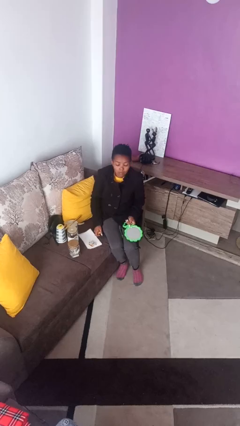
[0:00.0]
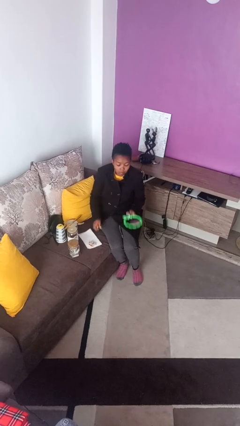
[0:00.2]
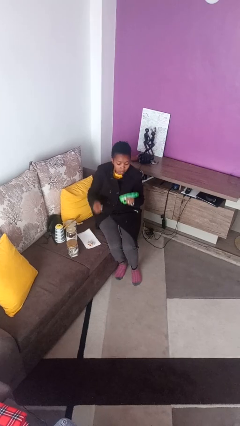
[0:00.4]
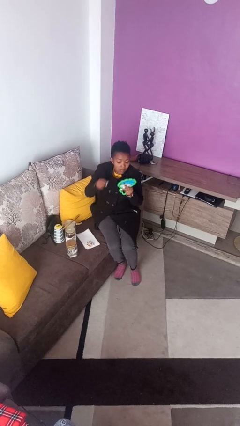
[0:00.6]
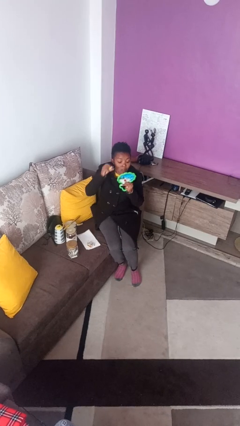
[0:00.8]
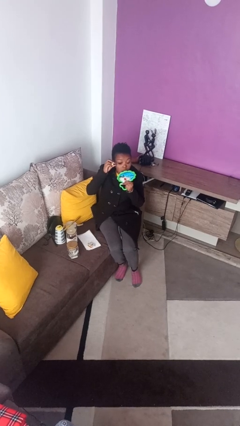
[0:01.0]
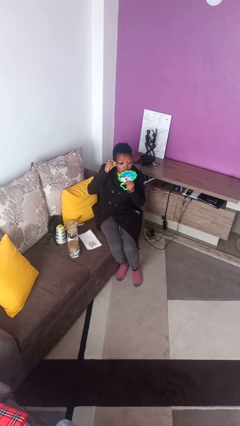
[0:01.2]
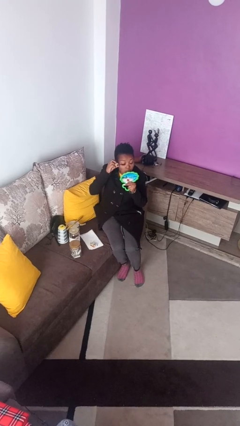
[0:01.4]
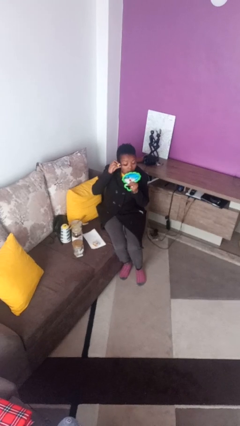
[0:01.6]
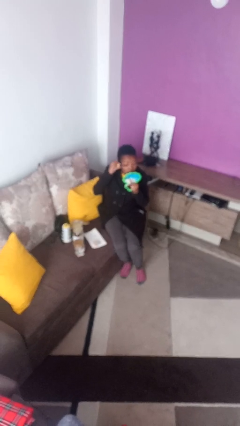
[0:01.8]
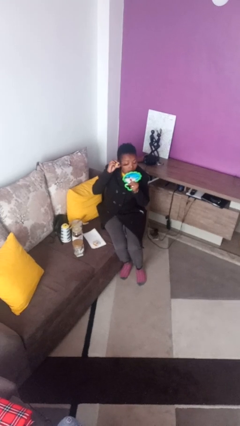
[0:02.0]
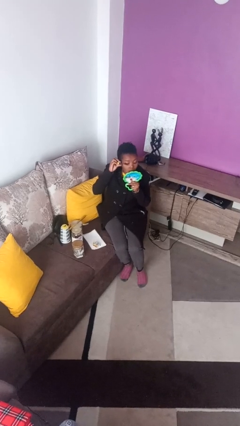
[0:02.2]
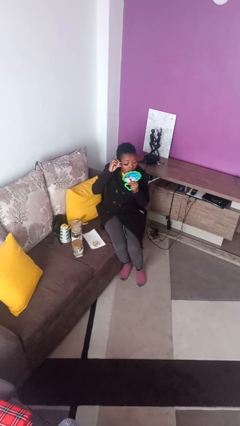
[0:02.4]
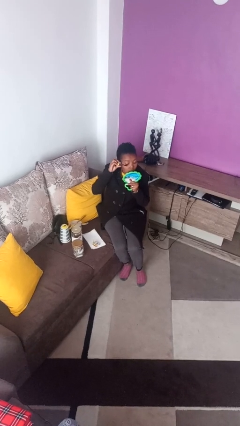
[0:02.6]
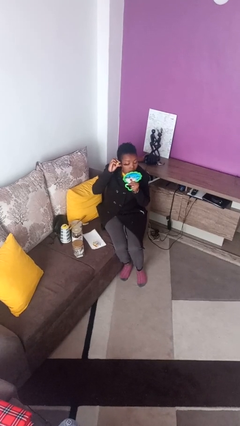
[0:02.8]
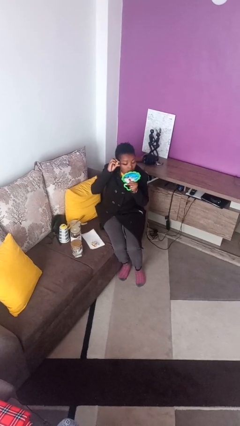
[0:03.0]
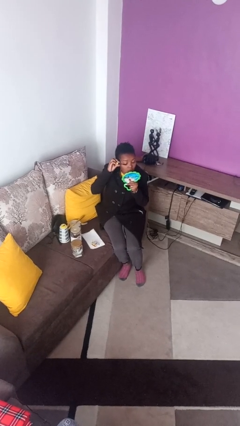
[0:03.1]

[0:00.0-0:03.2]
person applies eye makeup

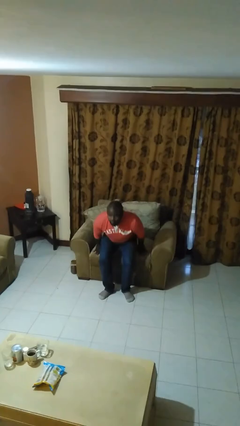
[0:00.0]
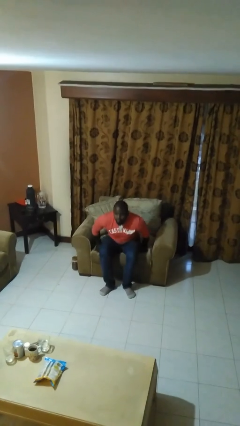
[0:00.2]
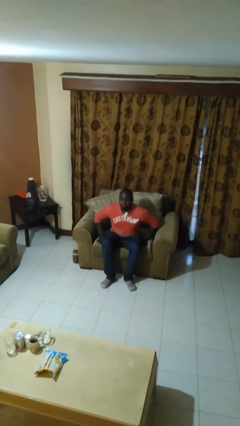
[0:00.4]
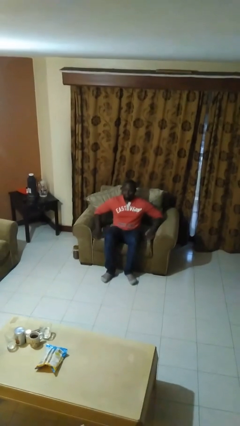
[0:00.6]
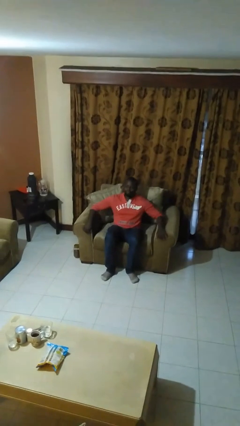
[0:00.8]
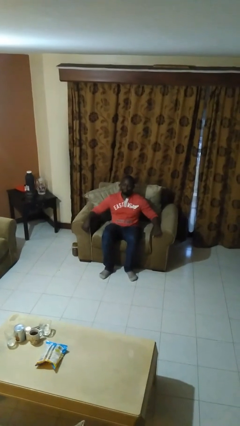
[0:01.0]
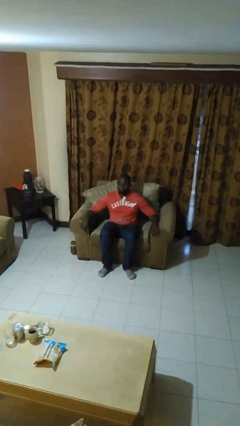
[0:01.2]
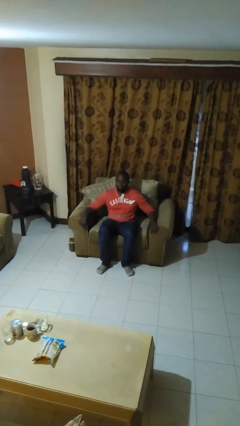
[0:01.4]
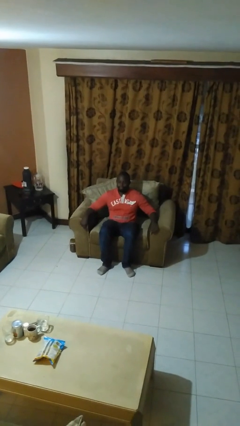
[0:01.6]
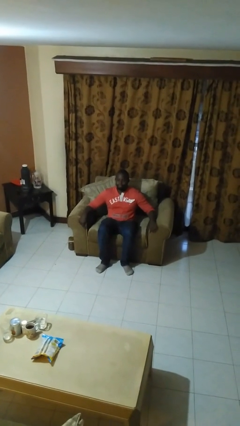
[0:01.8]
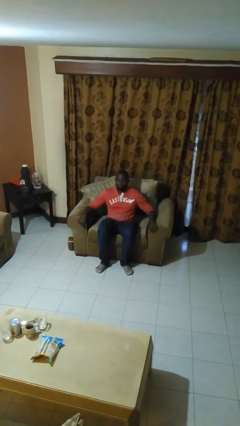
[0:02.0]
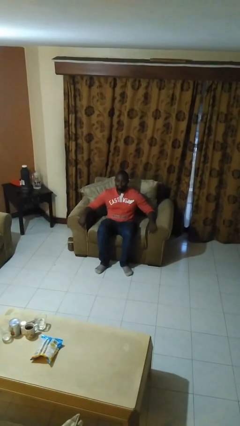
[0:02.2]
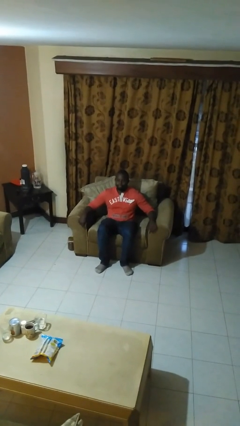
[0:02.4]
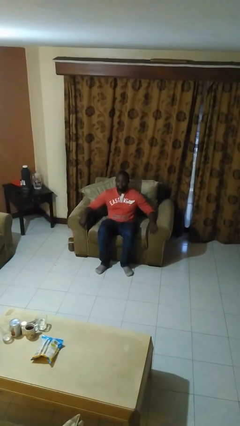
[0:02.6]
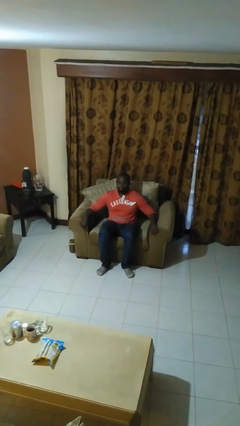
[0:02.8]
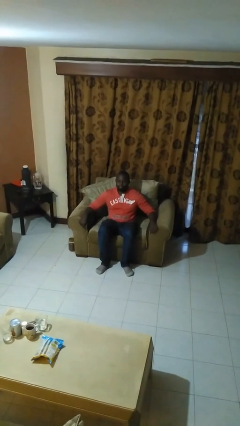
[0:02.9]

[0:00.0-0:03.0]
person sits down

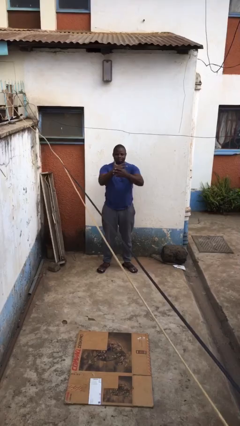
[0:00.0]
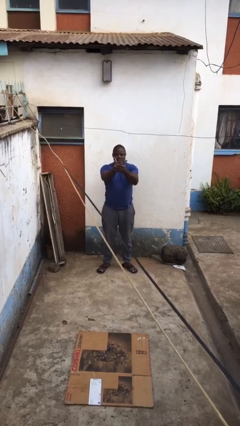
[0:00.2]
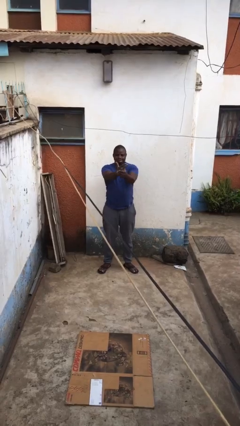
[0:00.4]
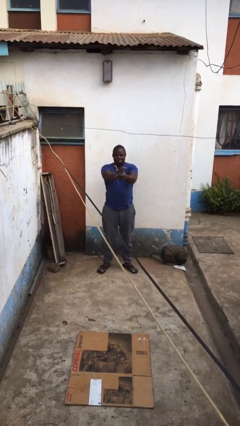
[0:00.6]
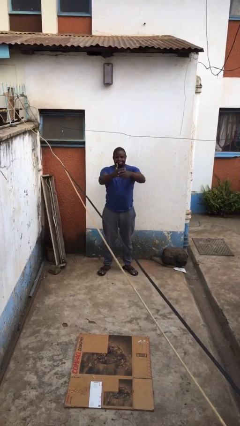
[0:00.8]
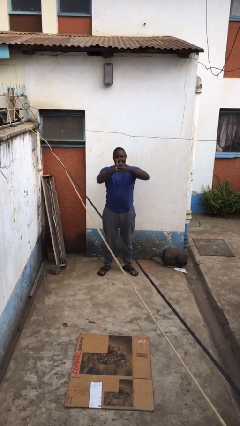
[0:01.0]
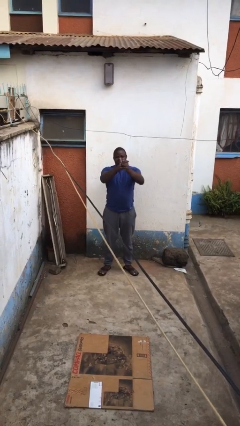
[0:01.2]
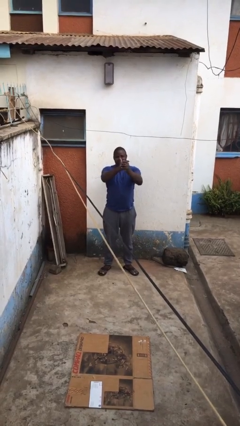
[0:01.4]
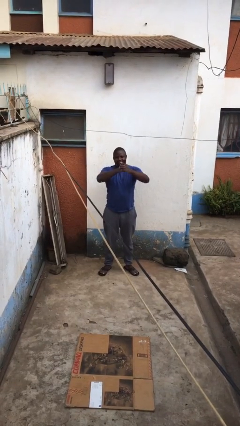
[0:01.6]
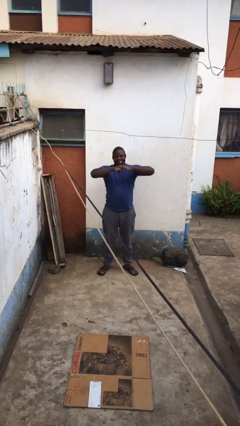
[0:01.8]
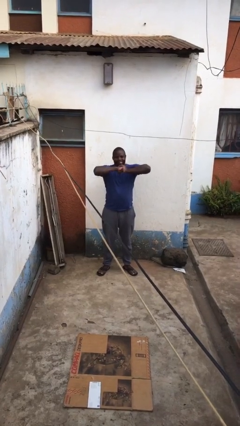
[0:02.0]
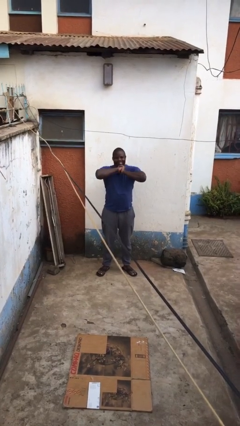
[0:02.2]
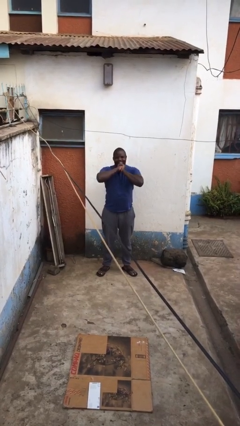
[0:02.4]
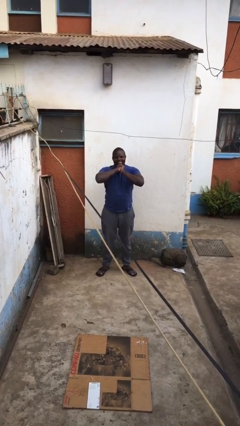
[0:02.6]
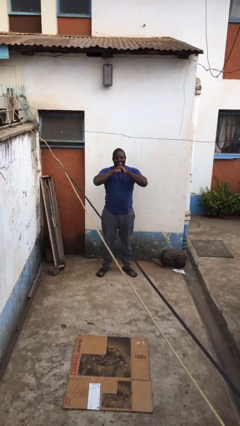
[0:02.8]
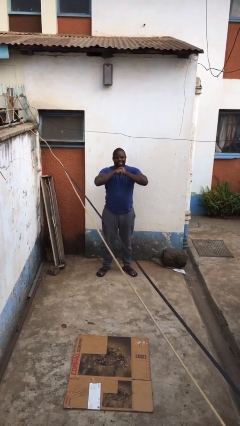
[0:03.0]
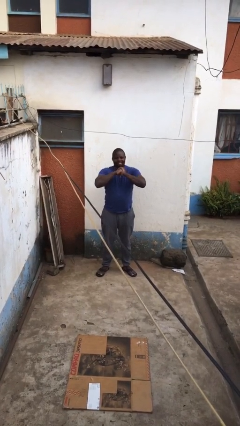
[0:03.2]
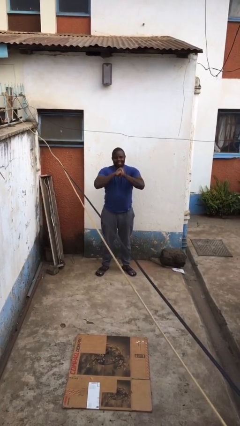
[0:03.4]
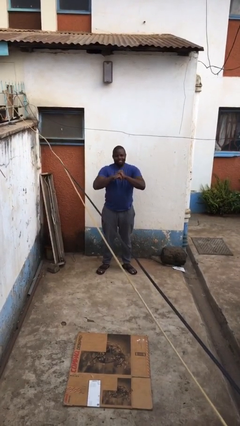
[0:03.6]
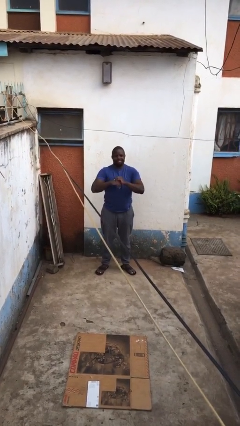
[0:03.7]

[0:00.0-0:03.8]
person cracks knuckles

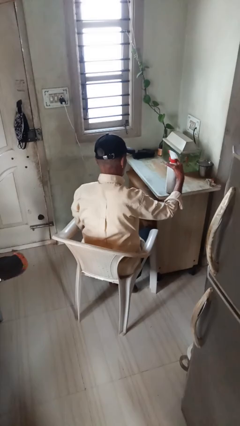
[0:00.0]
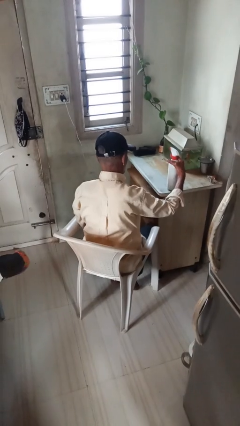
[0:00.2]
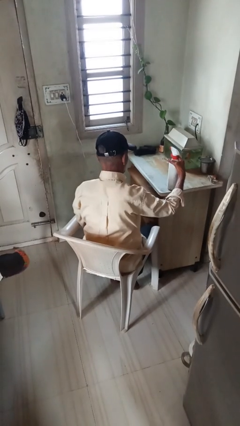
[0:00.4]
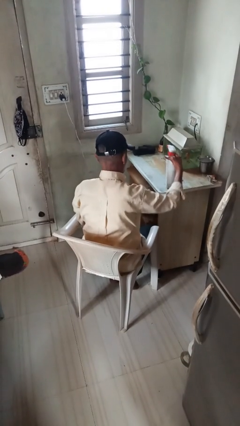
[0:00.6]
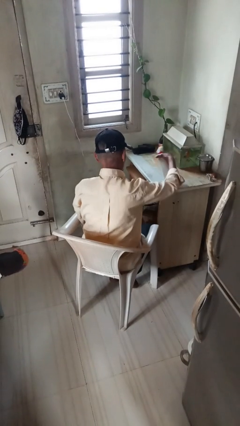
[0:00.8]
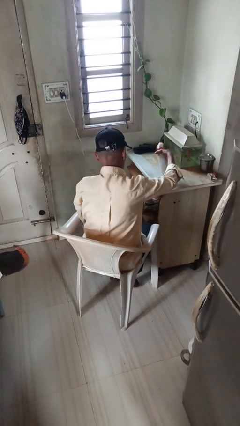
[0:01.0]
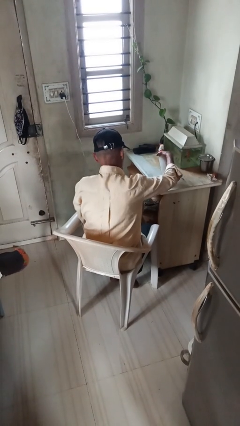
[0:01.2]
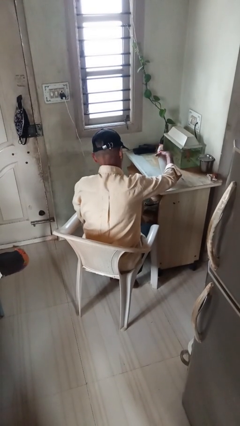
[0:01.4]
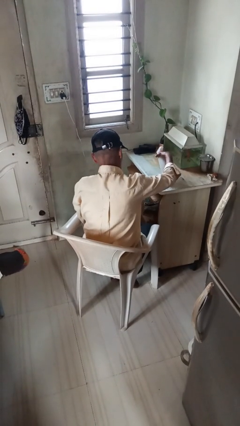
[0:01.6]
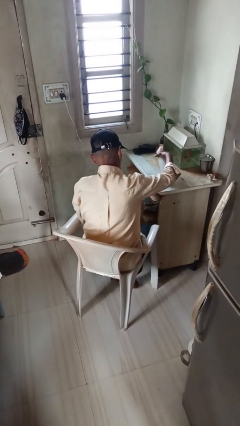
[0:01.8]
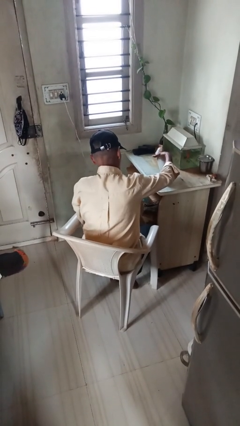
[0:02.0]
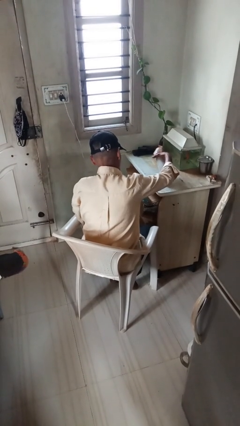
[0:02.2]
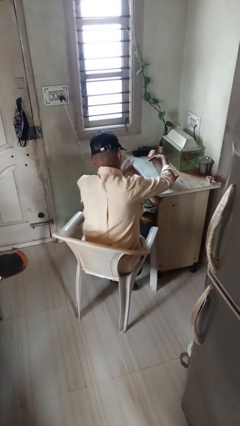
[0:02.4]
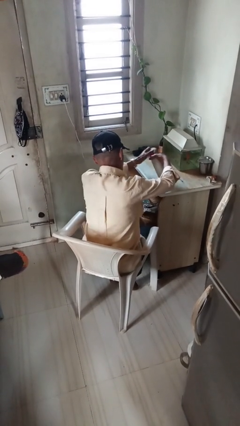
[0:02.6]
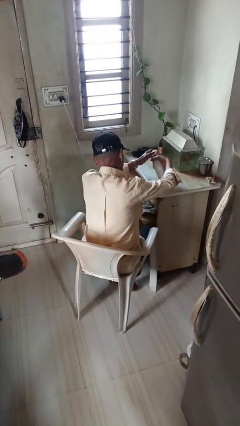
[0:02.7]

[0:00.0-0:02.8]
person sprays from bottle

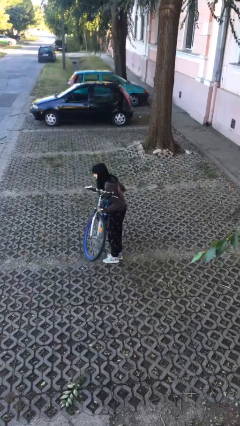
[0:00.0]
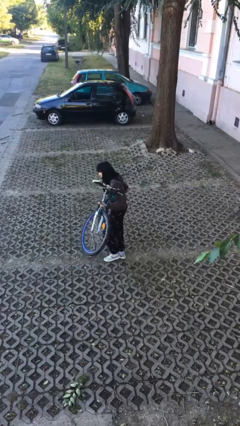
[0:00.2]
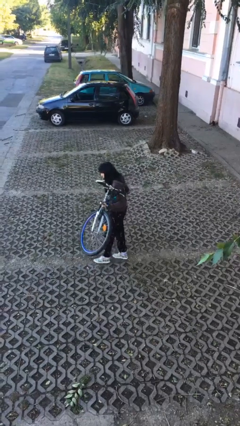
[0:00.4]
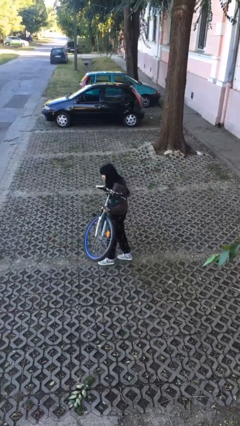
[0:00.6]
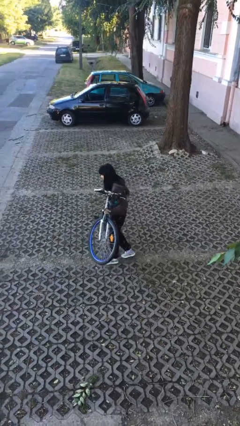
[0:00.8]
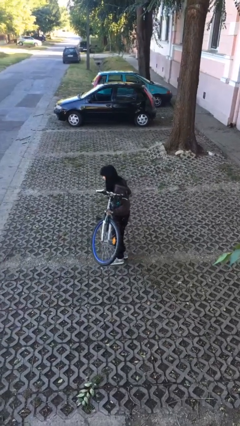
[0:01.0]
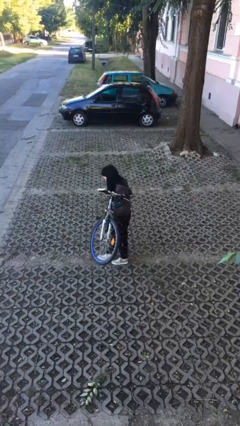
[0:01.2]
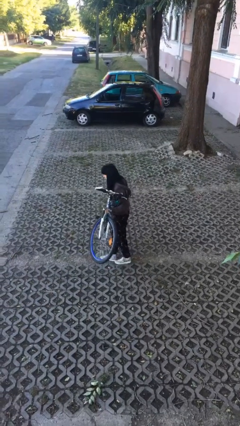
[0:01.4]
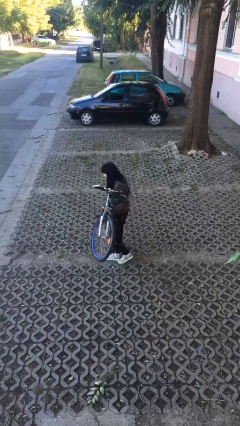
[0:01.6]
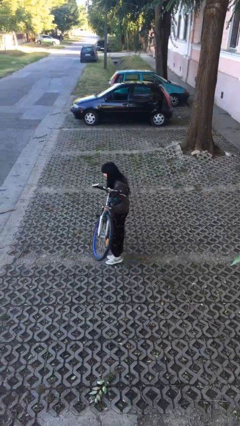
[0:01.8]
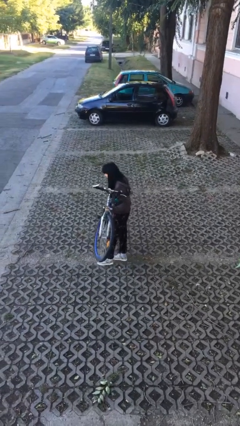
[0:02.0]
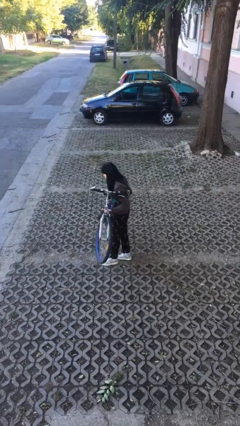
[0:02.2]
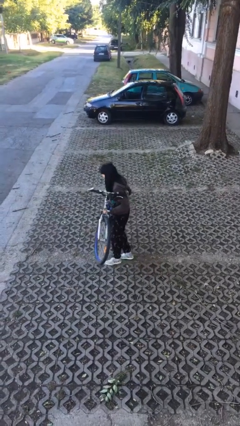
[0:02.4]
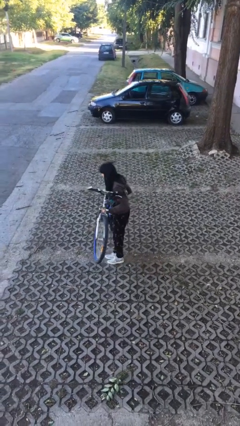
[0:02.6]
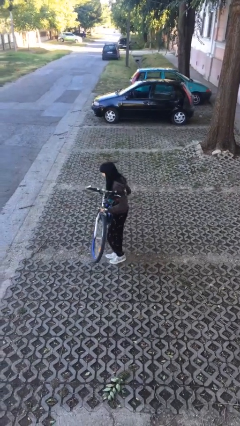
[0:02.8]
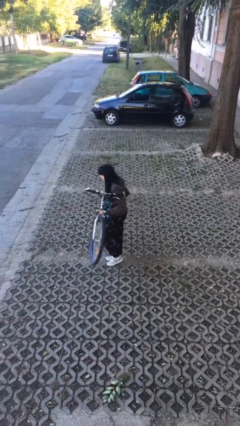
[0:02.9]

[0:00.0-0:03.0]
person carries heavy object

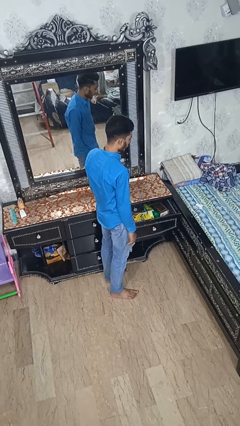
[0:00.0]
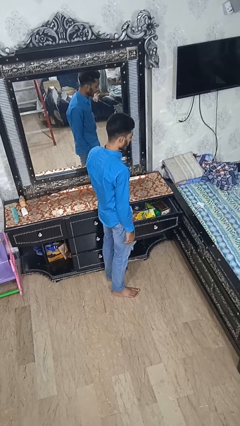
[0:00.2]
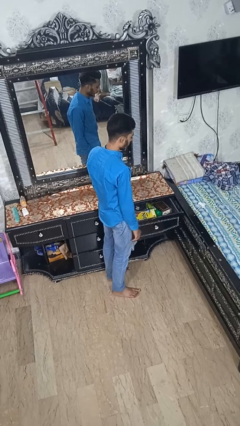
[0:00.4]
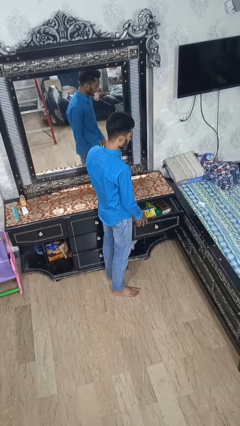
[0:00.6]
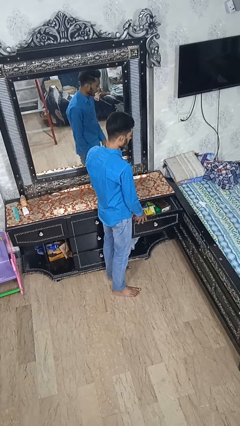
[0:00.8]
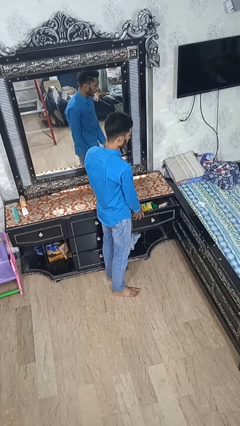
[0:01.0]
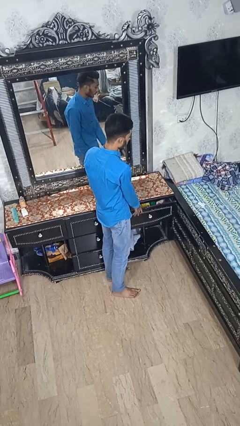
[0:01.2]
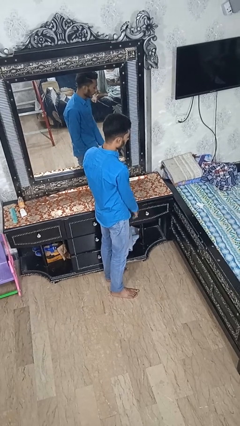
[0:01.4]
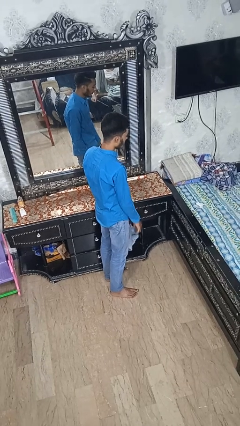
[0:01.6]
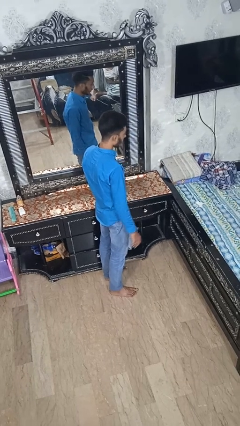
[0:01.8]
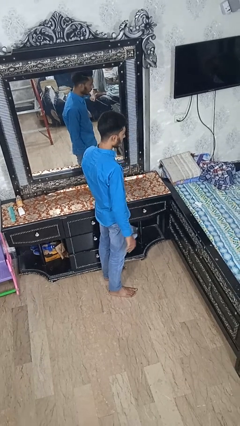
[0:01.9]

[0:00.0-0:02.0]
person closes dresser drawer
